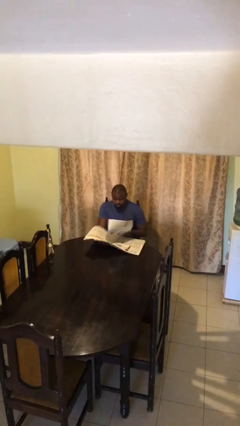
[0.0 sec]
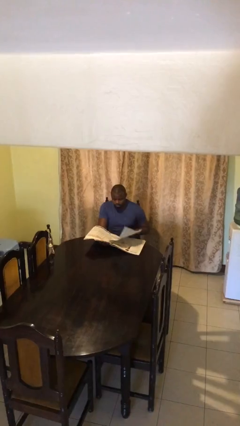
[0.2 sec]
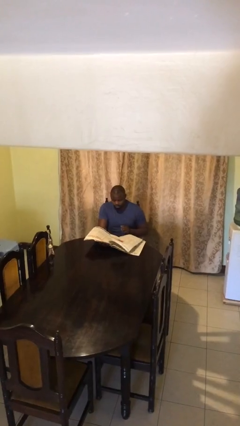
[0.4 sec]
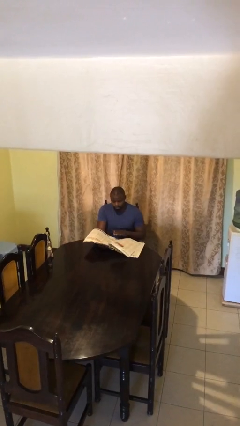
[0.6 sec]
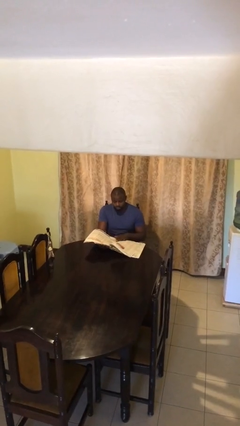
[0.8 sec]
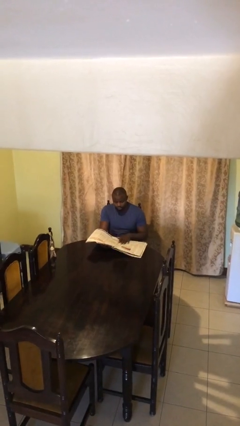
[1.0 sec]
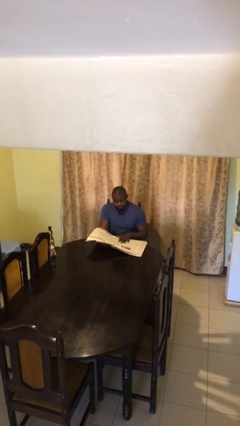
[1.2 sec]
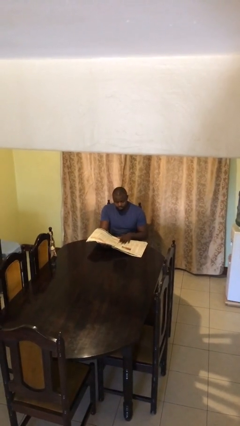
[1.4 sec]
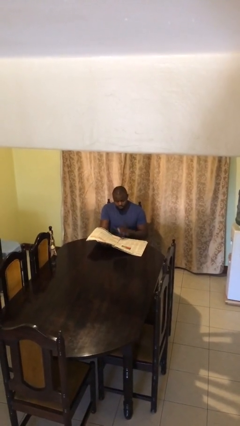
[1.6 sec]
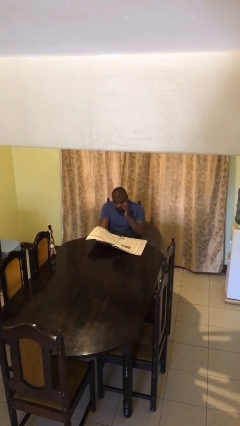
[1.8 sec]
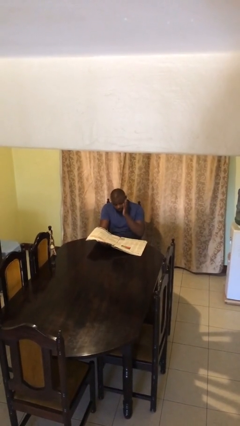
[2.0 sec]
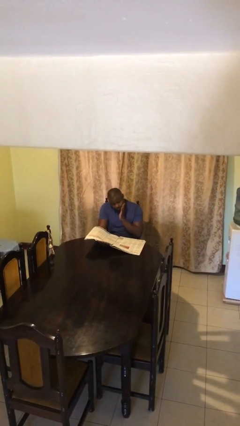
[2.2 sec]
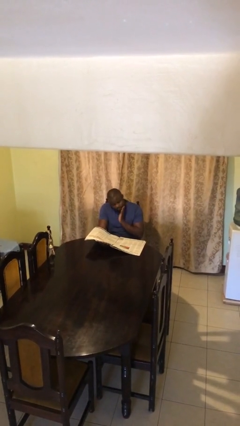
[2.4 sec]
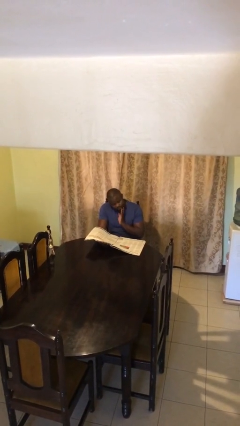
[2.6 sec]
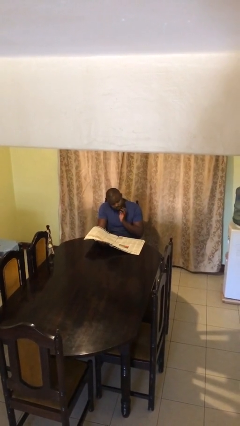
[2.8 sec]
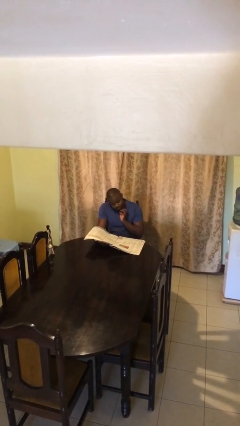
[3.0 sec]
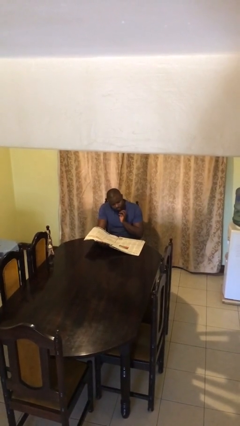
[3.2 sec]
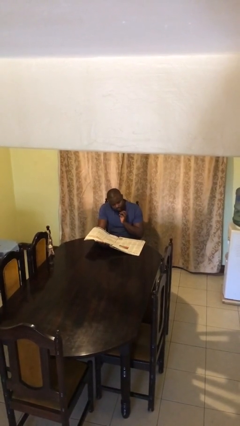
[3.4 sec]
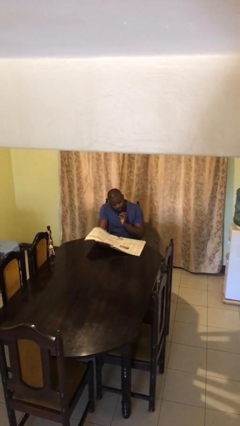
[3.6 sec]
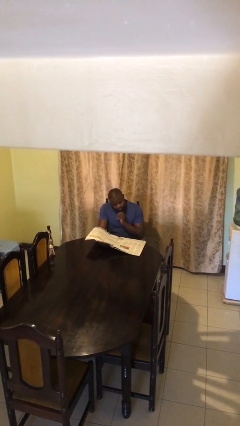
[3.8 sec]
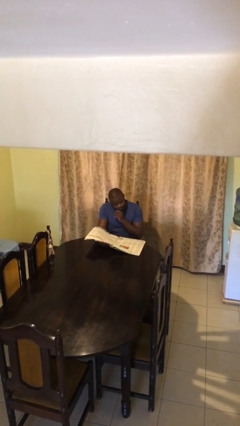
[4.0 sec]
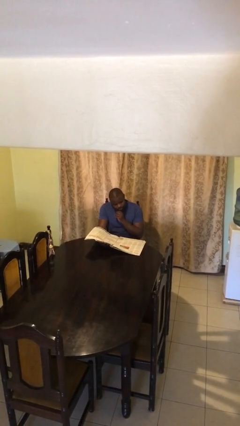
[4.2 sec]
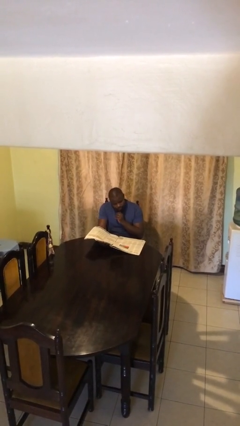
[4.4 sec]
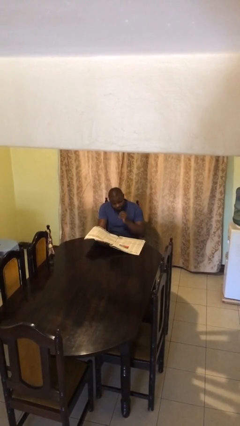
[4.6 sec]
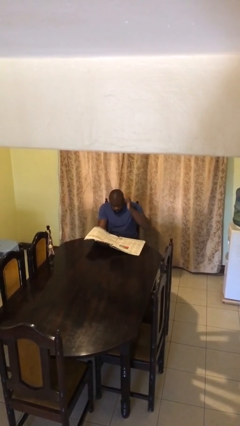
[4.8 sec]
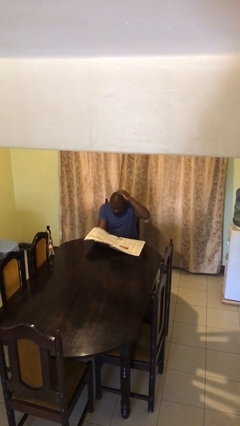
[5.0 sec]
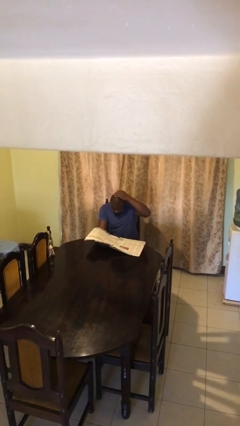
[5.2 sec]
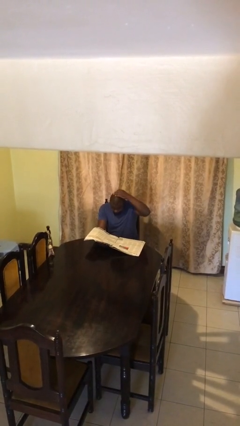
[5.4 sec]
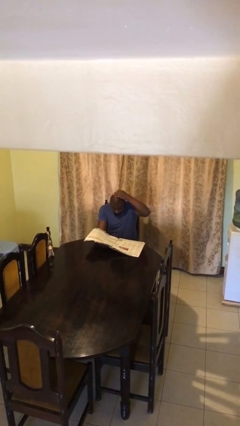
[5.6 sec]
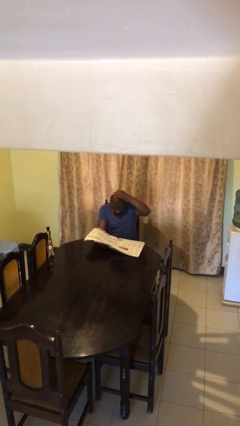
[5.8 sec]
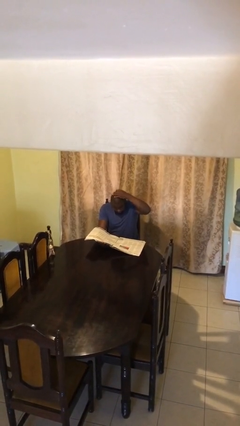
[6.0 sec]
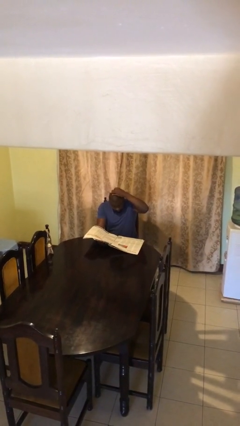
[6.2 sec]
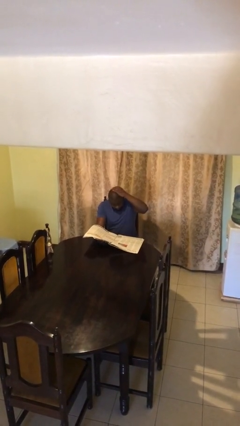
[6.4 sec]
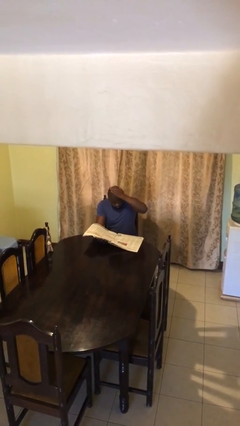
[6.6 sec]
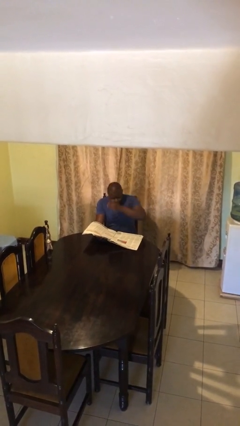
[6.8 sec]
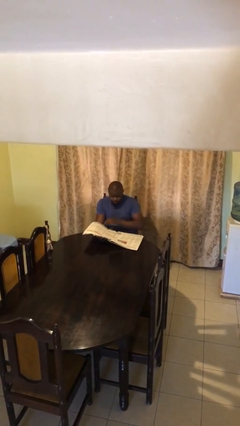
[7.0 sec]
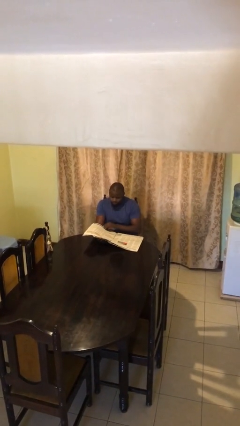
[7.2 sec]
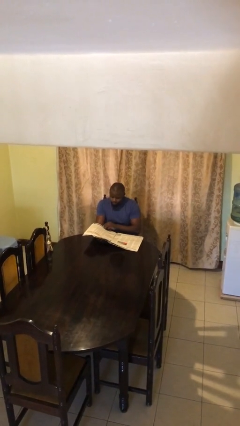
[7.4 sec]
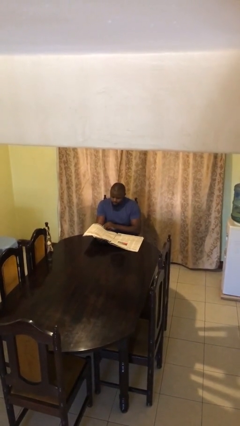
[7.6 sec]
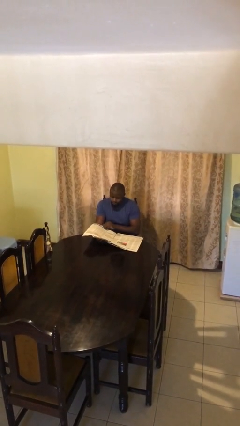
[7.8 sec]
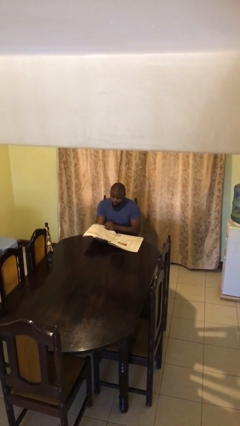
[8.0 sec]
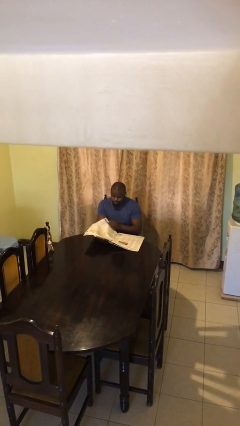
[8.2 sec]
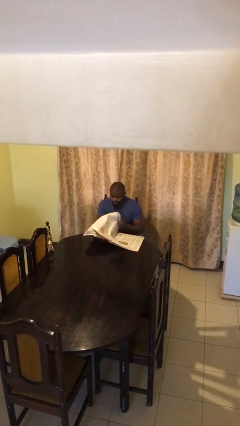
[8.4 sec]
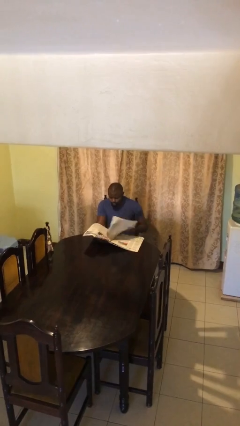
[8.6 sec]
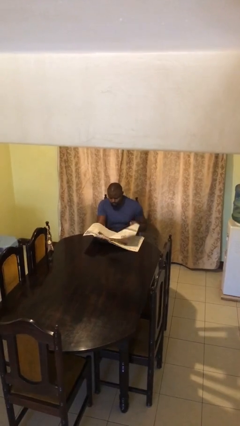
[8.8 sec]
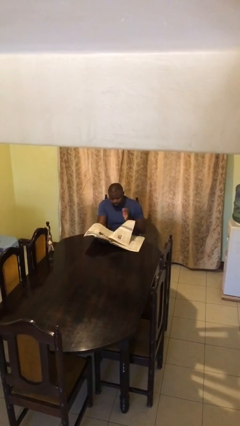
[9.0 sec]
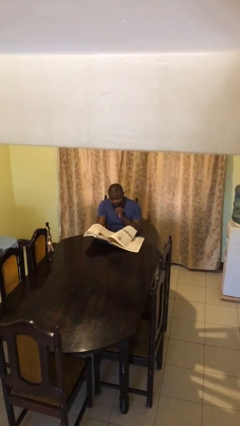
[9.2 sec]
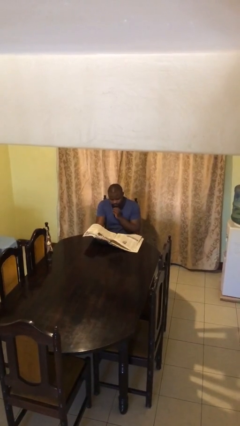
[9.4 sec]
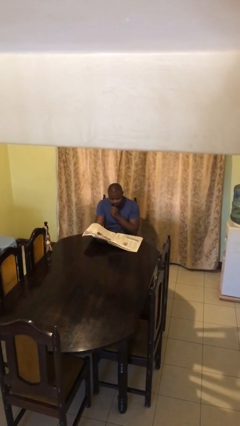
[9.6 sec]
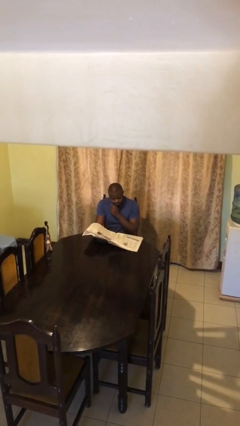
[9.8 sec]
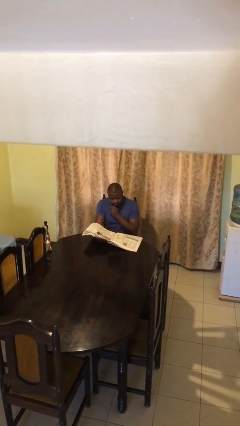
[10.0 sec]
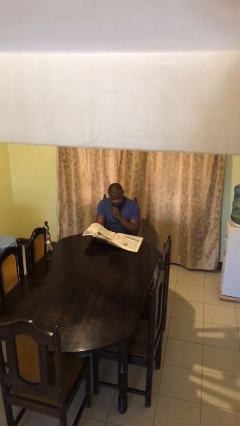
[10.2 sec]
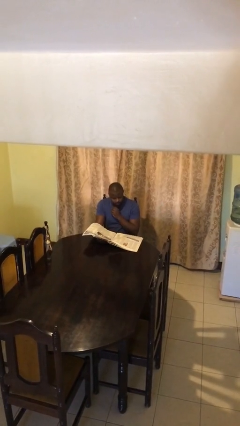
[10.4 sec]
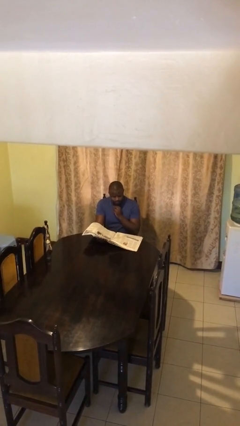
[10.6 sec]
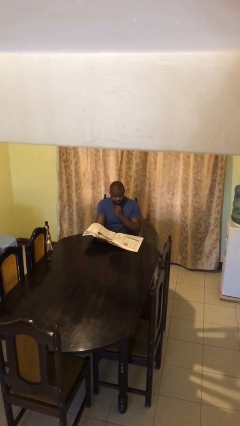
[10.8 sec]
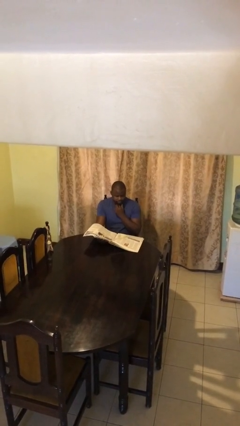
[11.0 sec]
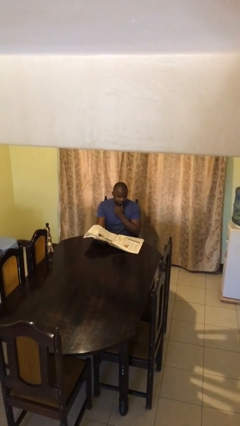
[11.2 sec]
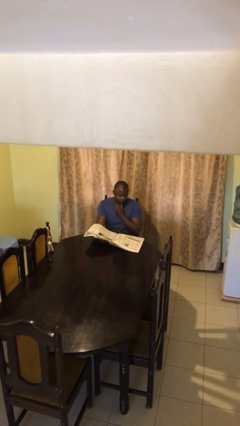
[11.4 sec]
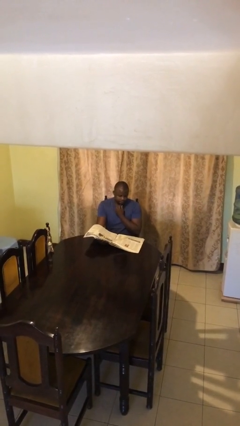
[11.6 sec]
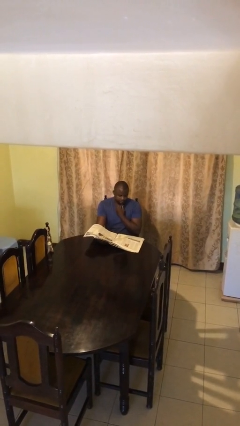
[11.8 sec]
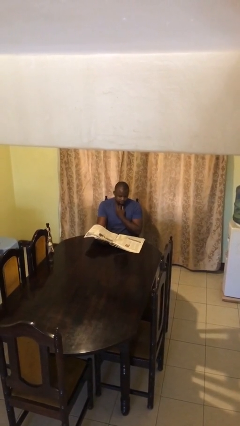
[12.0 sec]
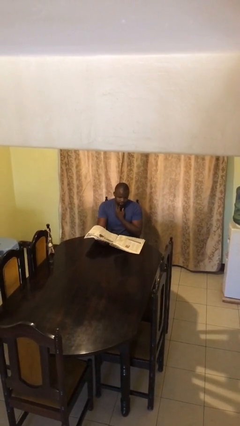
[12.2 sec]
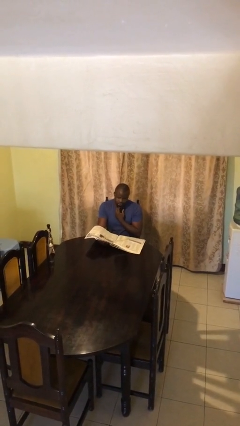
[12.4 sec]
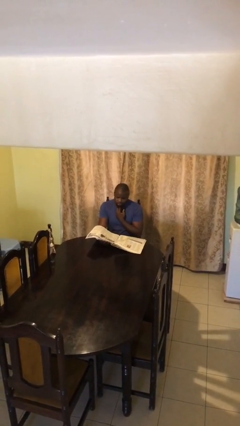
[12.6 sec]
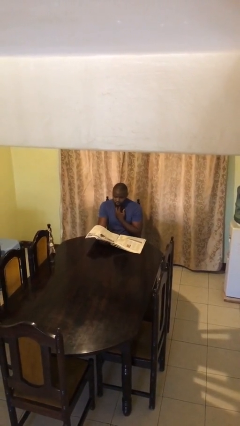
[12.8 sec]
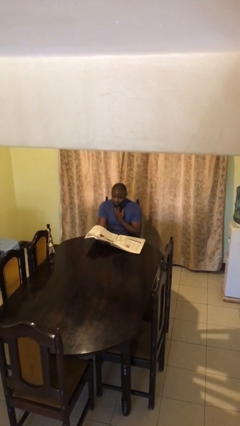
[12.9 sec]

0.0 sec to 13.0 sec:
person reads document

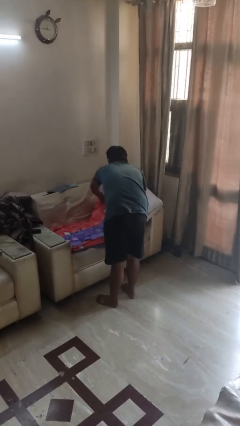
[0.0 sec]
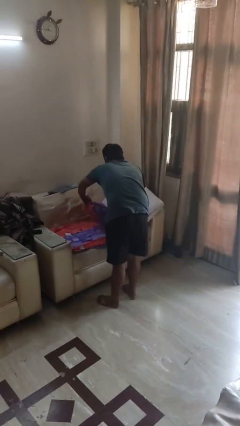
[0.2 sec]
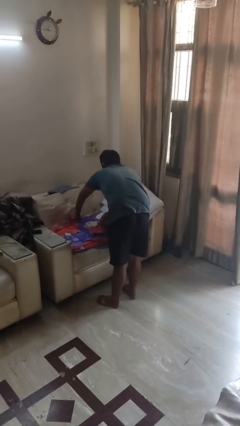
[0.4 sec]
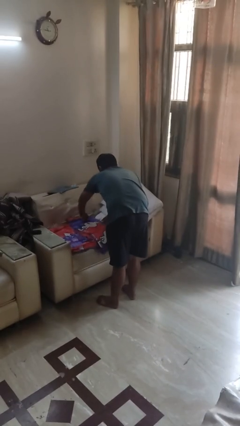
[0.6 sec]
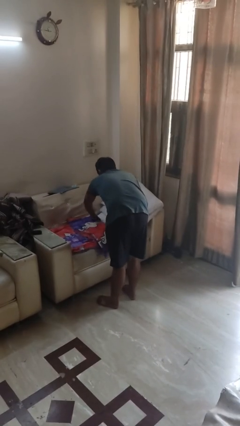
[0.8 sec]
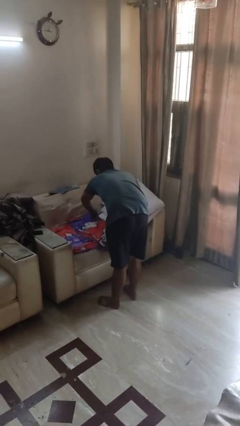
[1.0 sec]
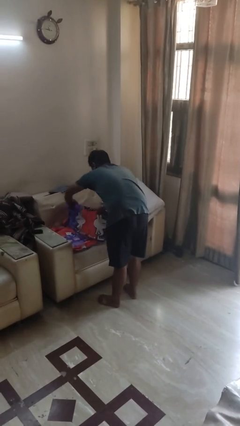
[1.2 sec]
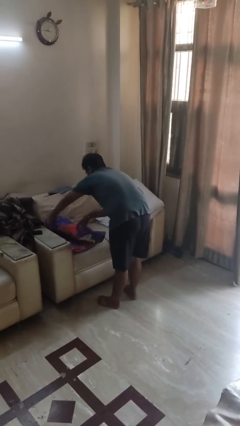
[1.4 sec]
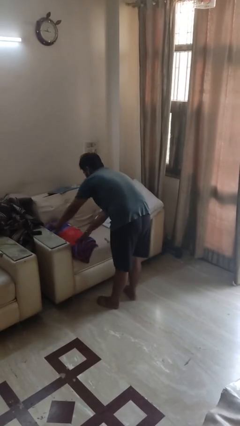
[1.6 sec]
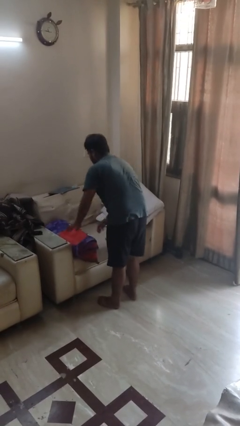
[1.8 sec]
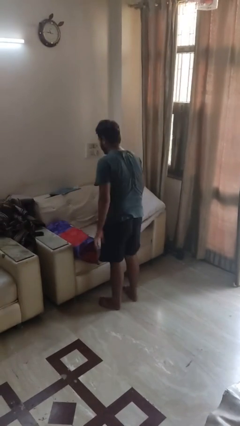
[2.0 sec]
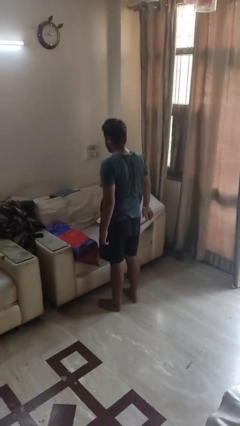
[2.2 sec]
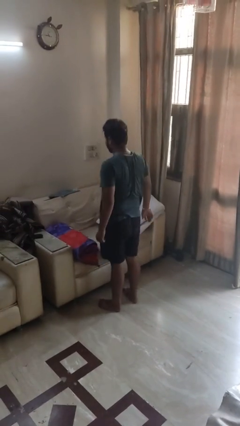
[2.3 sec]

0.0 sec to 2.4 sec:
person folds blanket

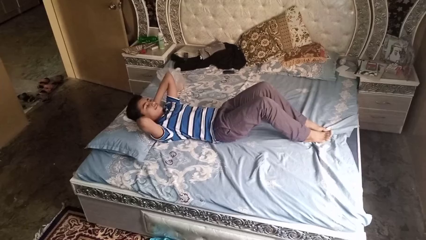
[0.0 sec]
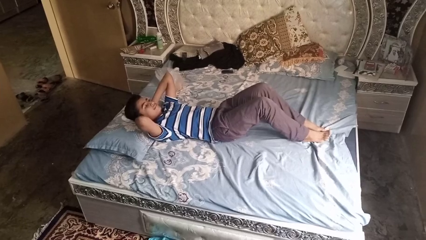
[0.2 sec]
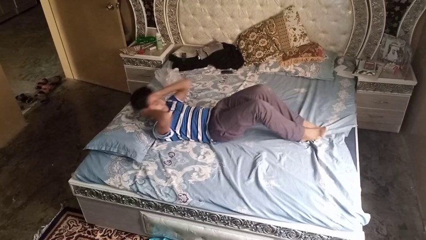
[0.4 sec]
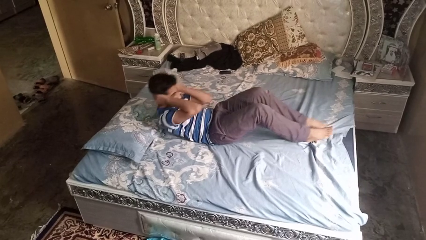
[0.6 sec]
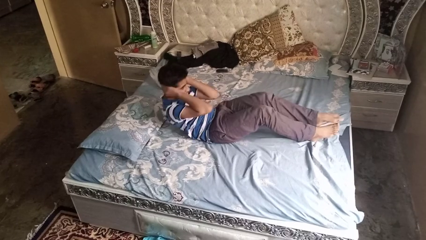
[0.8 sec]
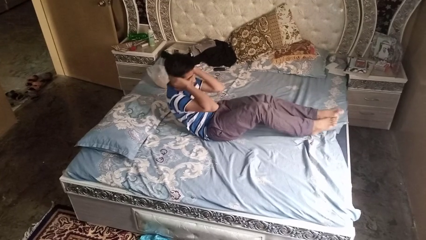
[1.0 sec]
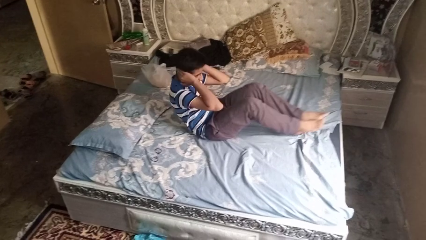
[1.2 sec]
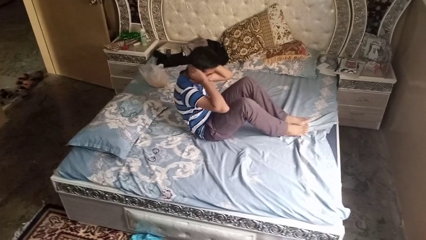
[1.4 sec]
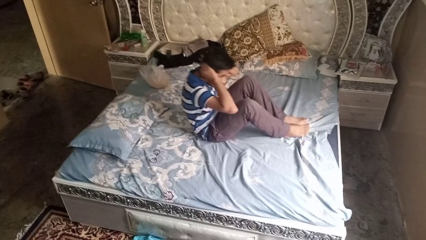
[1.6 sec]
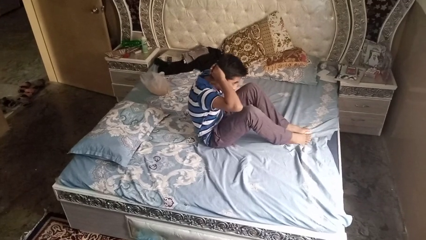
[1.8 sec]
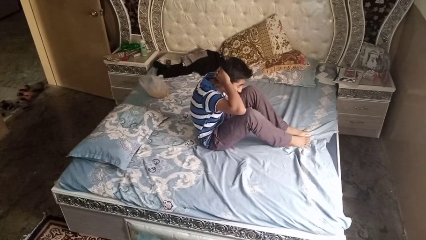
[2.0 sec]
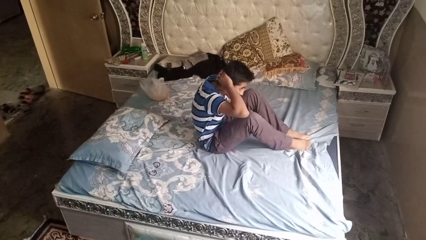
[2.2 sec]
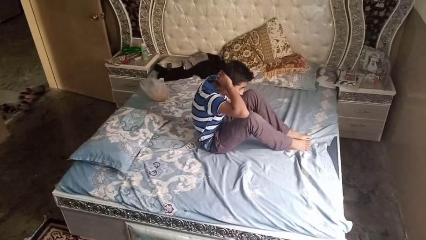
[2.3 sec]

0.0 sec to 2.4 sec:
person exercises with situp
